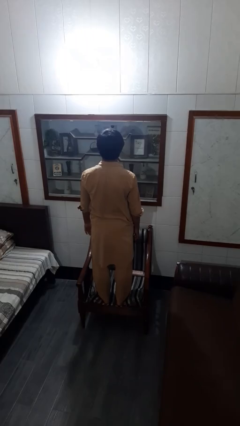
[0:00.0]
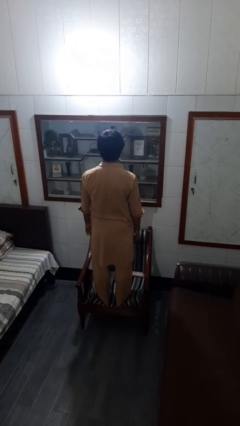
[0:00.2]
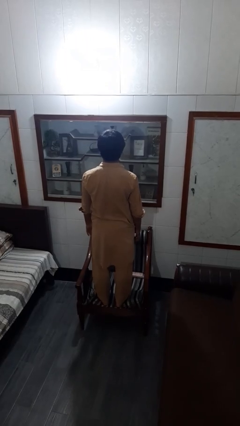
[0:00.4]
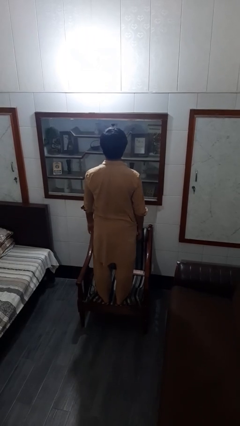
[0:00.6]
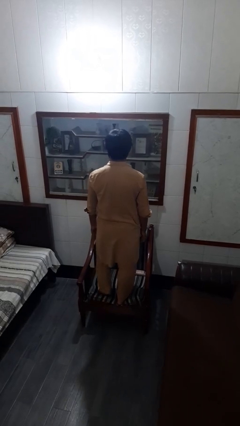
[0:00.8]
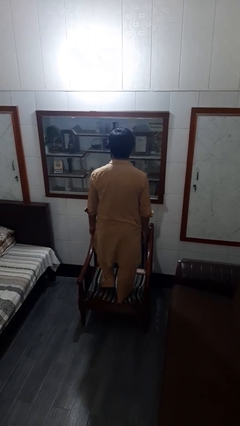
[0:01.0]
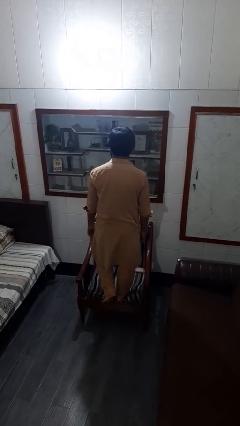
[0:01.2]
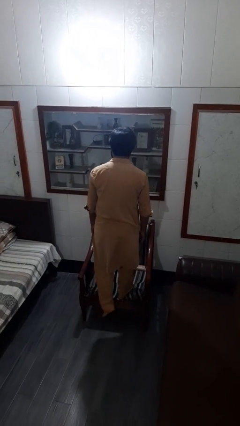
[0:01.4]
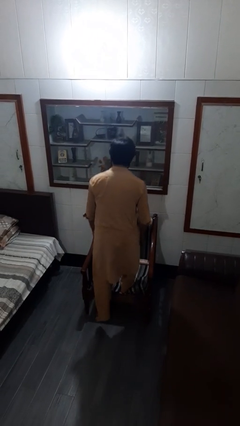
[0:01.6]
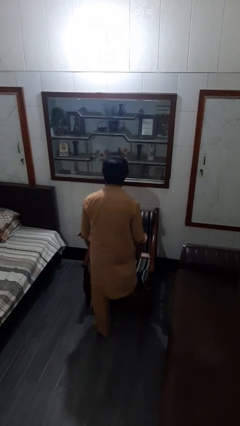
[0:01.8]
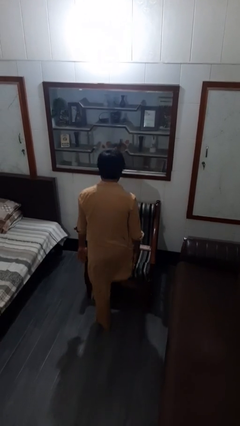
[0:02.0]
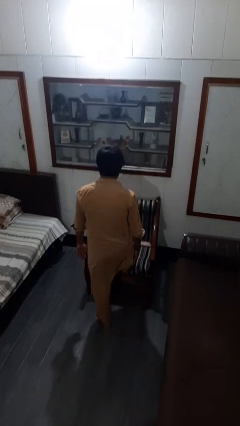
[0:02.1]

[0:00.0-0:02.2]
person climbs off chair

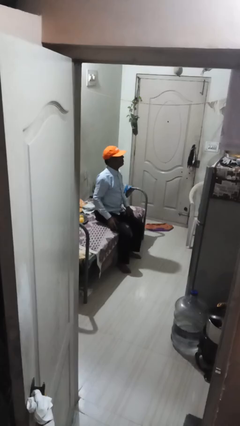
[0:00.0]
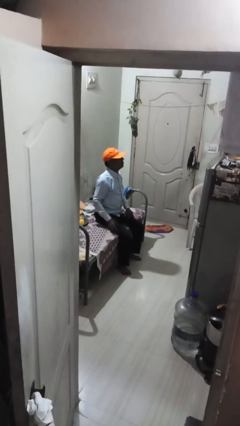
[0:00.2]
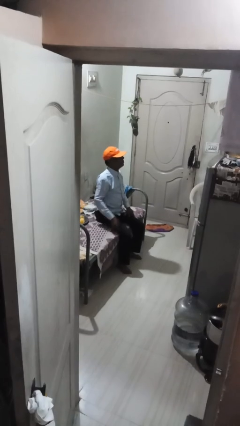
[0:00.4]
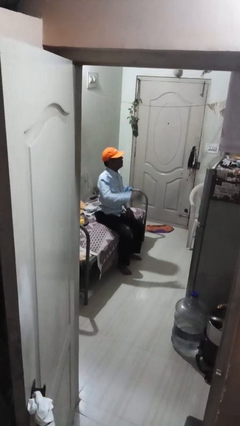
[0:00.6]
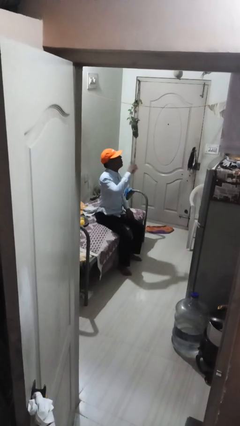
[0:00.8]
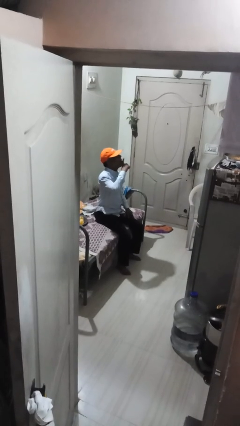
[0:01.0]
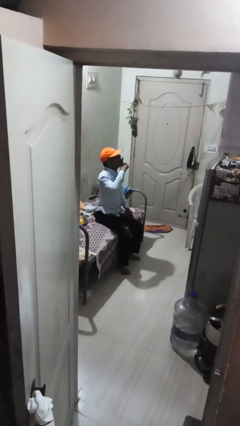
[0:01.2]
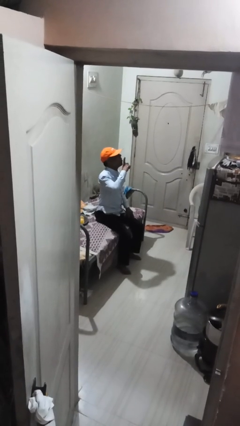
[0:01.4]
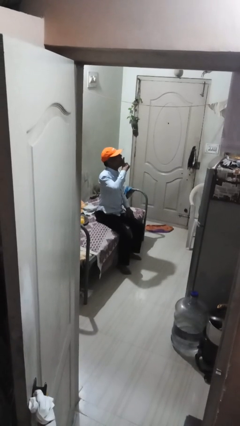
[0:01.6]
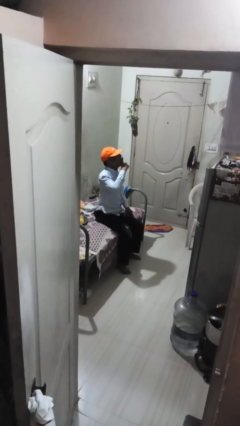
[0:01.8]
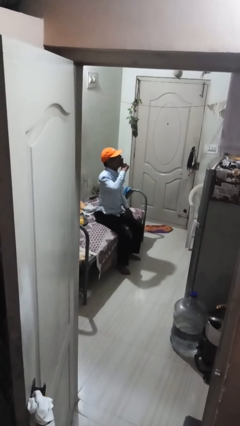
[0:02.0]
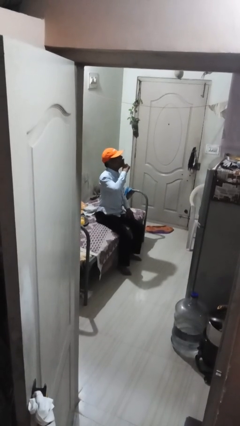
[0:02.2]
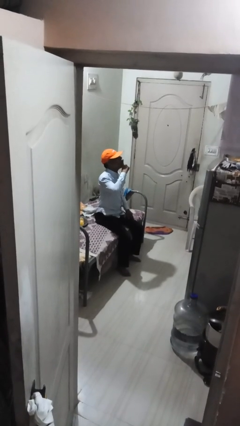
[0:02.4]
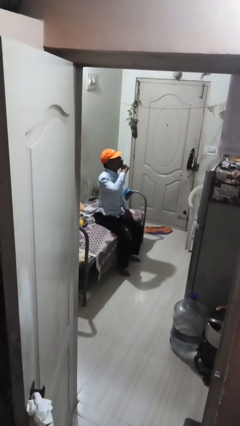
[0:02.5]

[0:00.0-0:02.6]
person gestures be quiet

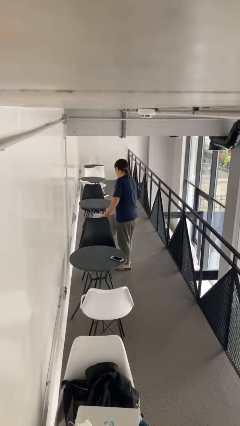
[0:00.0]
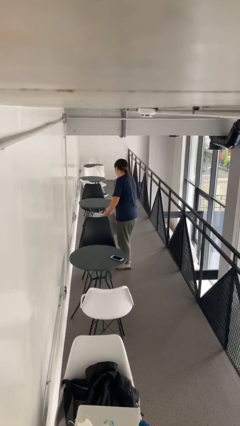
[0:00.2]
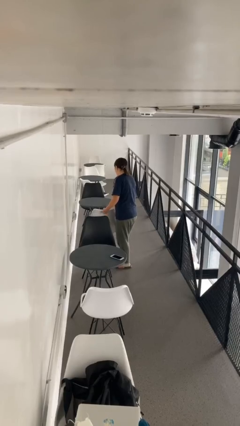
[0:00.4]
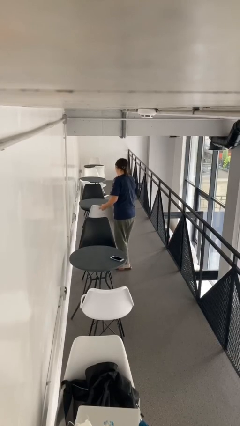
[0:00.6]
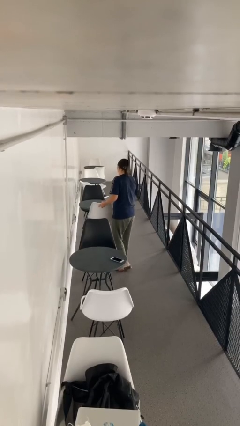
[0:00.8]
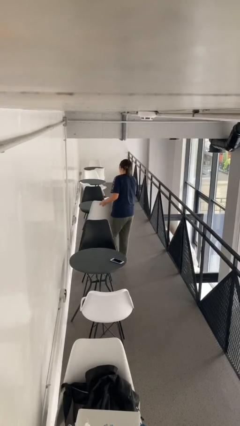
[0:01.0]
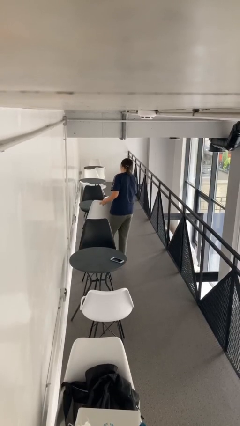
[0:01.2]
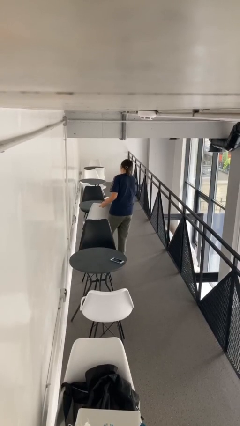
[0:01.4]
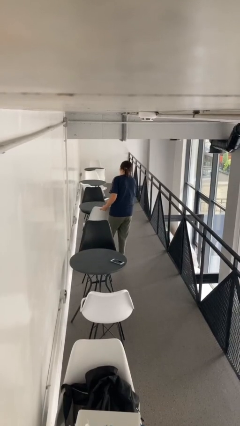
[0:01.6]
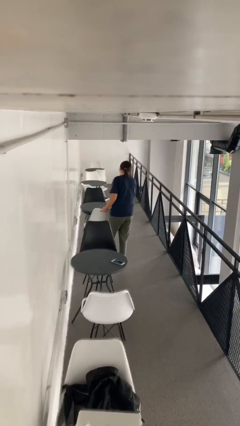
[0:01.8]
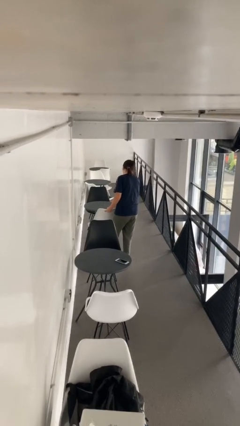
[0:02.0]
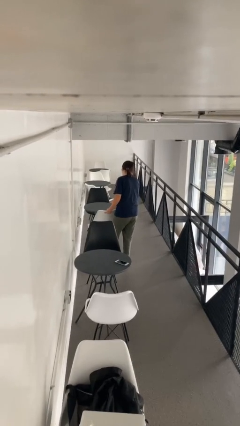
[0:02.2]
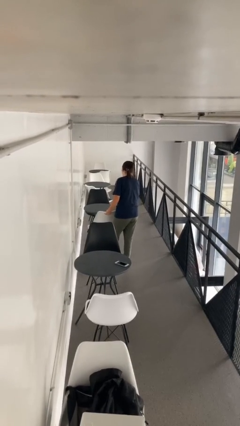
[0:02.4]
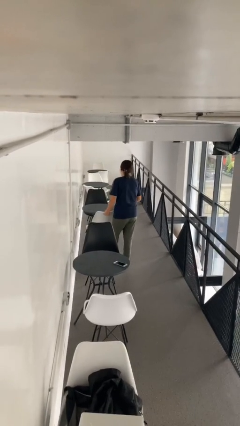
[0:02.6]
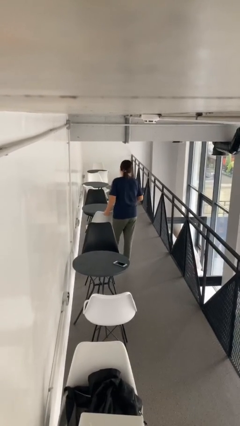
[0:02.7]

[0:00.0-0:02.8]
person pushes in chair

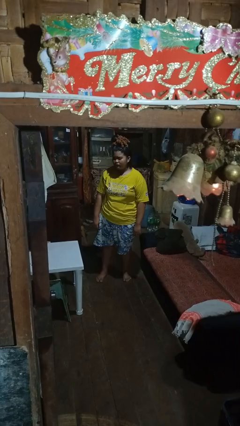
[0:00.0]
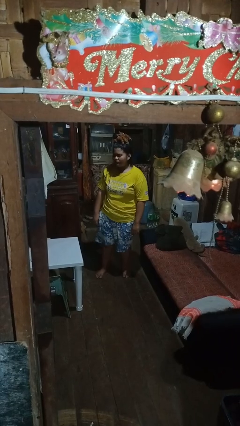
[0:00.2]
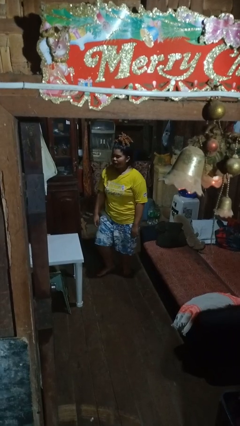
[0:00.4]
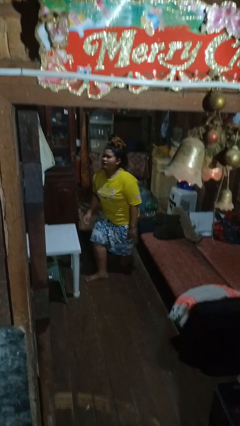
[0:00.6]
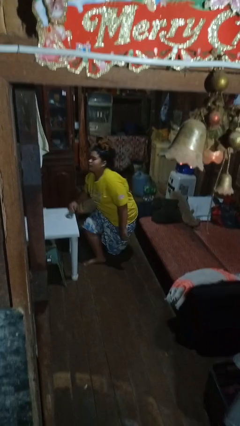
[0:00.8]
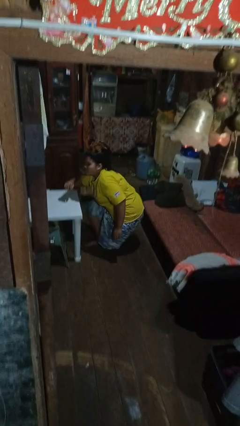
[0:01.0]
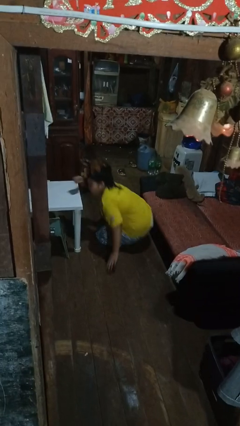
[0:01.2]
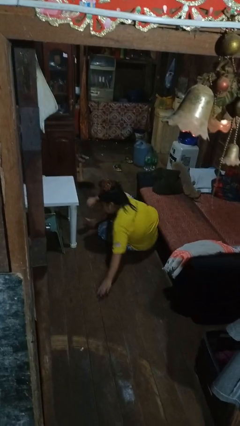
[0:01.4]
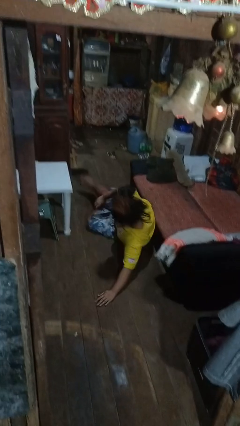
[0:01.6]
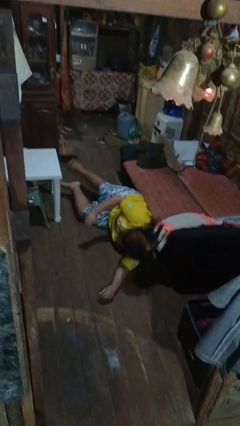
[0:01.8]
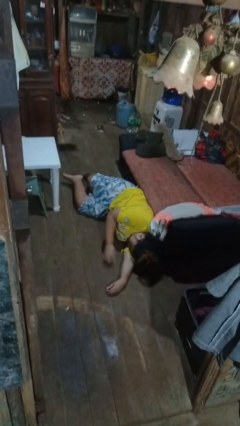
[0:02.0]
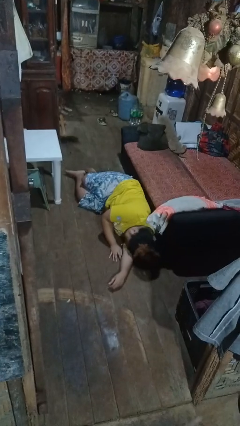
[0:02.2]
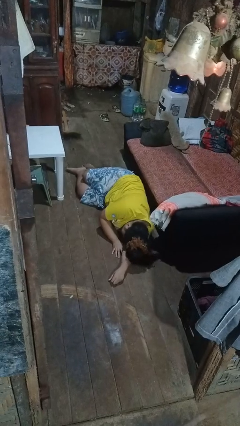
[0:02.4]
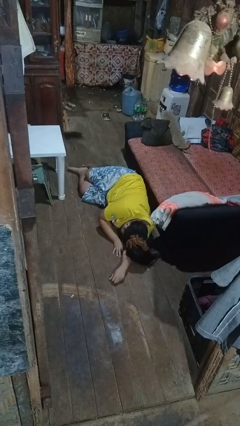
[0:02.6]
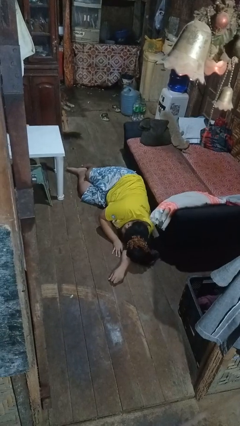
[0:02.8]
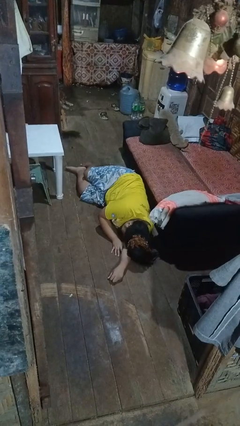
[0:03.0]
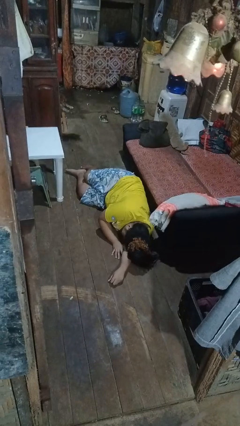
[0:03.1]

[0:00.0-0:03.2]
person falls while standing

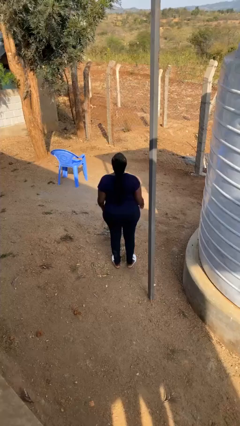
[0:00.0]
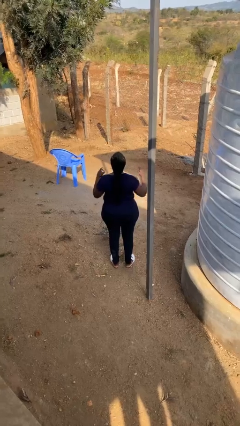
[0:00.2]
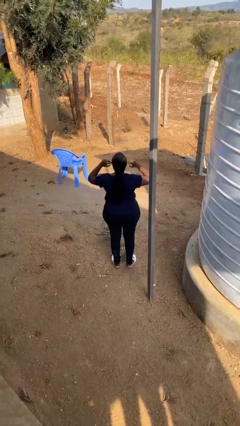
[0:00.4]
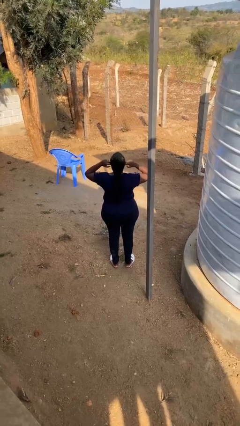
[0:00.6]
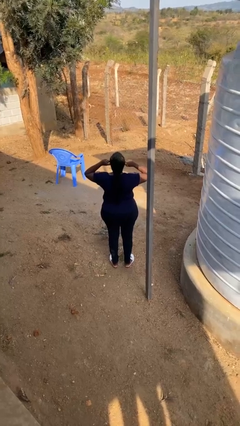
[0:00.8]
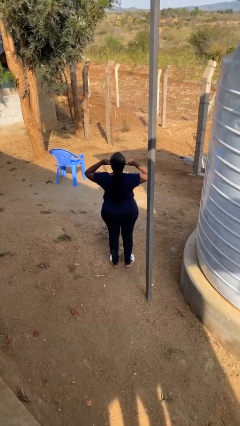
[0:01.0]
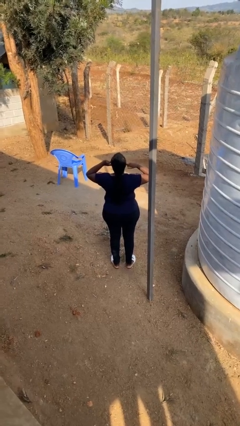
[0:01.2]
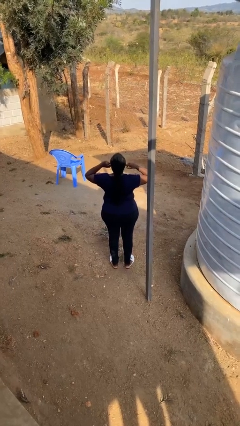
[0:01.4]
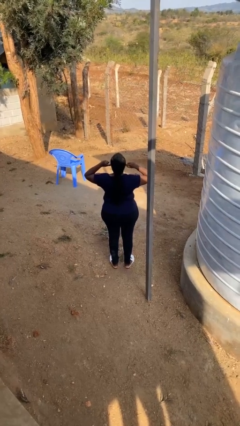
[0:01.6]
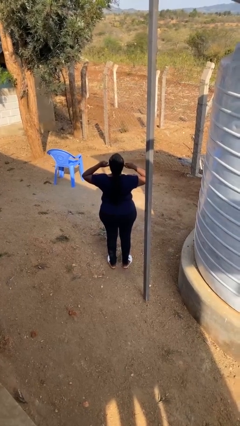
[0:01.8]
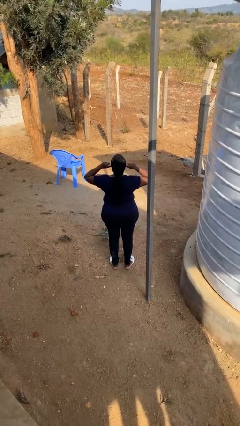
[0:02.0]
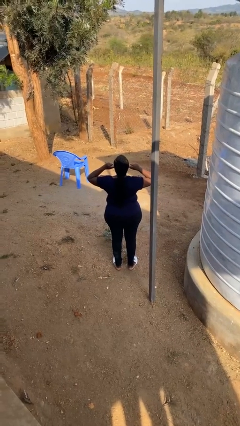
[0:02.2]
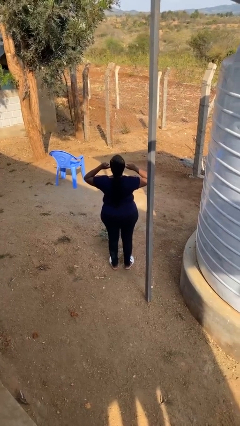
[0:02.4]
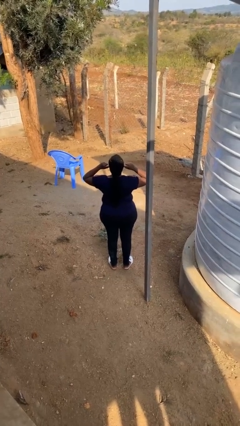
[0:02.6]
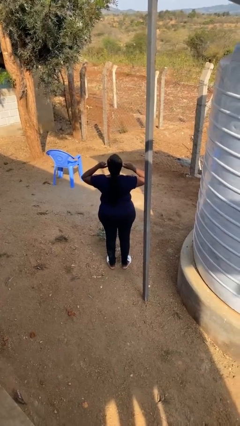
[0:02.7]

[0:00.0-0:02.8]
person puts fingers in ear

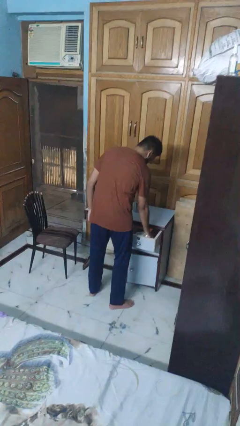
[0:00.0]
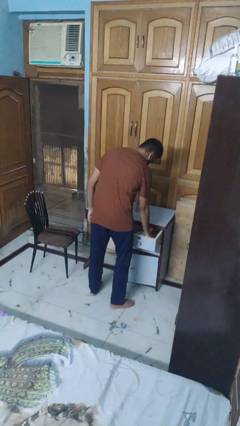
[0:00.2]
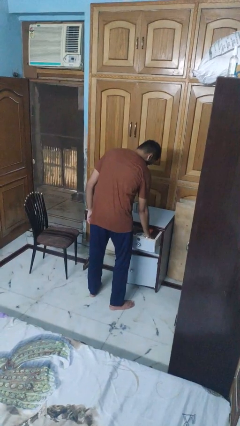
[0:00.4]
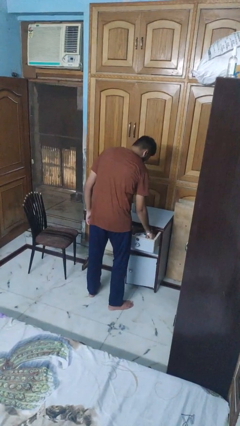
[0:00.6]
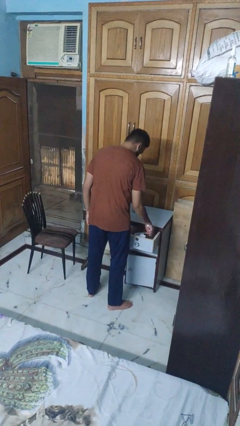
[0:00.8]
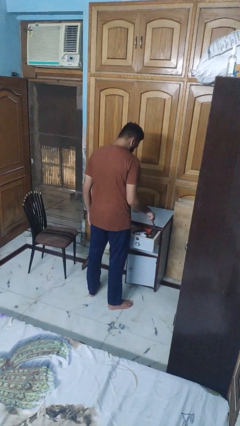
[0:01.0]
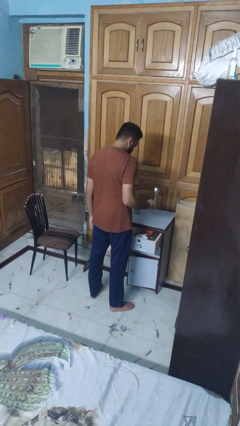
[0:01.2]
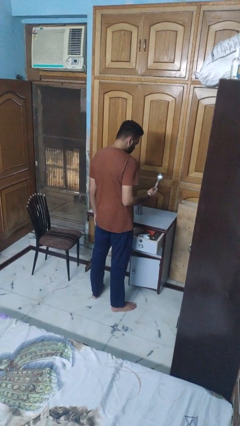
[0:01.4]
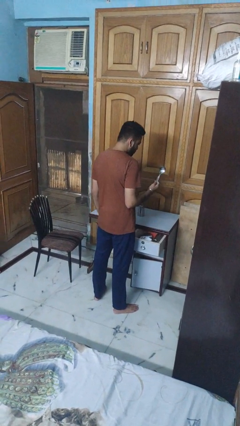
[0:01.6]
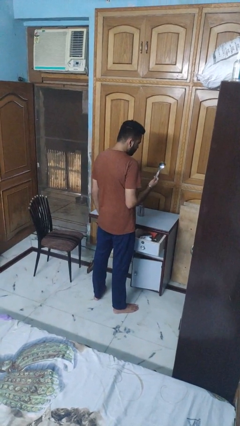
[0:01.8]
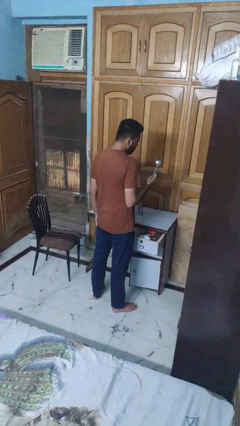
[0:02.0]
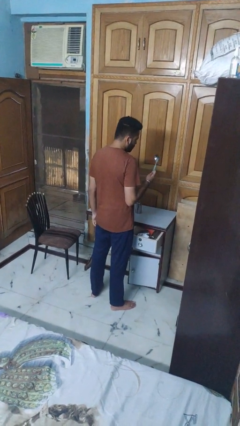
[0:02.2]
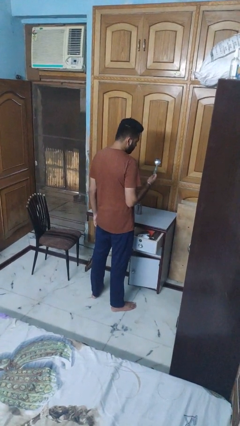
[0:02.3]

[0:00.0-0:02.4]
person takes object from kitchen drawer

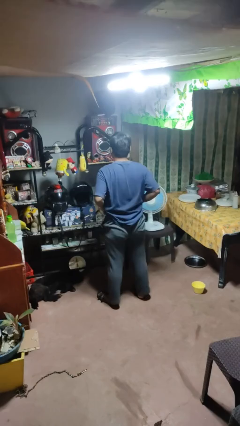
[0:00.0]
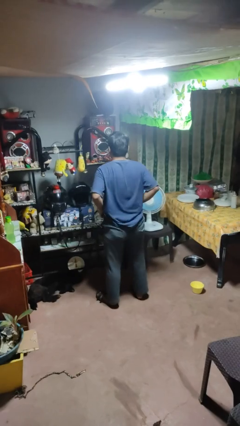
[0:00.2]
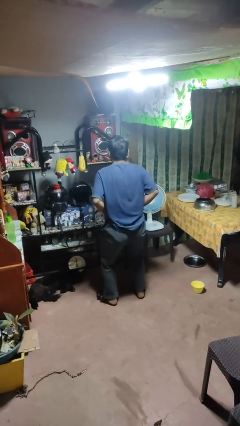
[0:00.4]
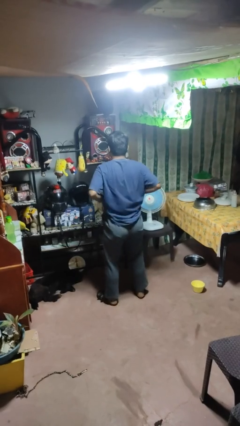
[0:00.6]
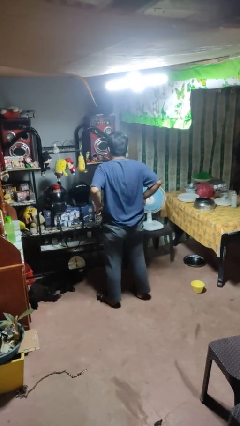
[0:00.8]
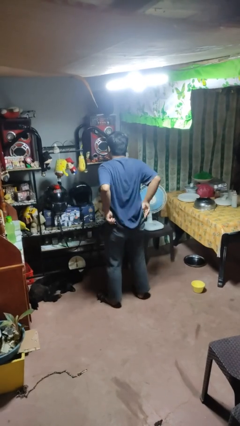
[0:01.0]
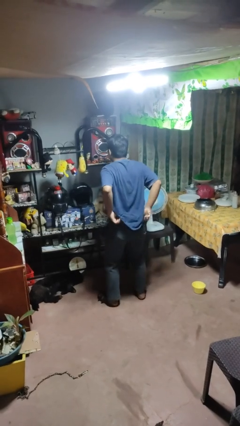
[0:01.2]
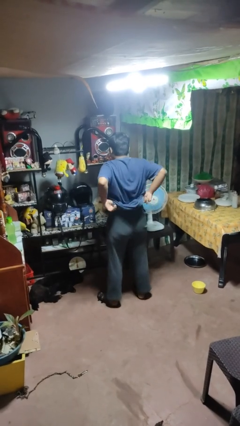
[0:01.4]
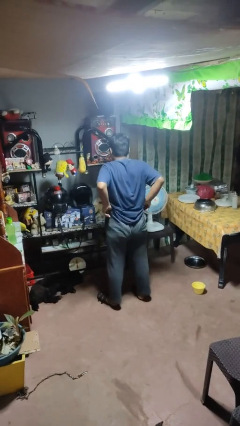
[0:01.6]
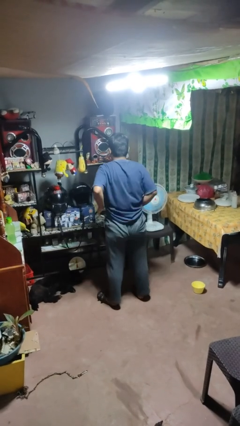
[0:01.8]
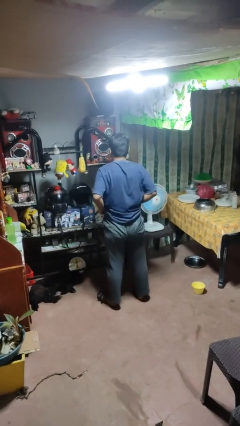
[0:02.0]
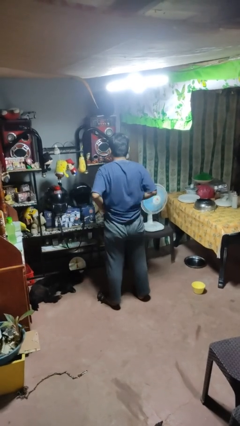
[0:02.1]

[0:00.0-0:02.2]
person hikes up pants
